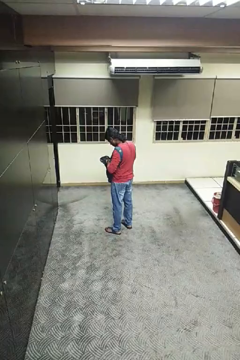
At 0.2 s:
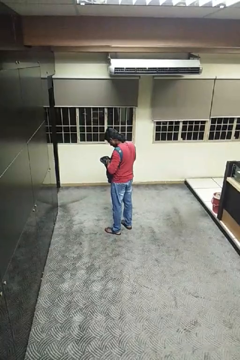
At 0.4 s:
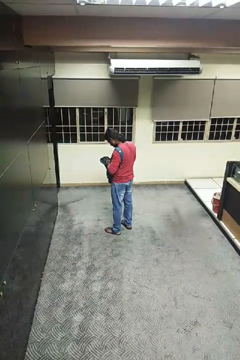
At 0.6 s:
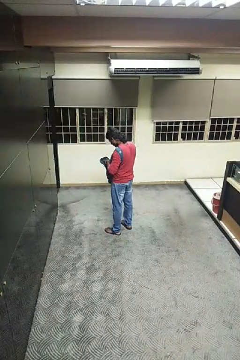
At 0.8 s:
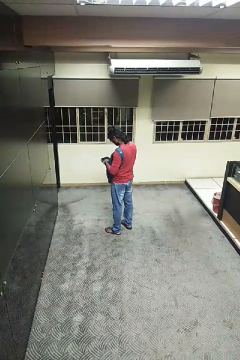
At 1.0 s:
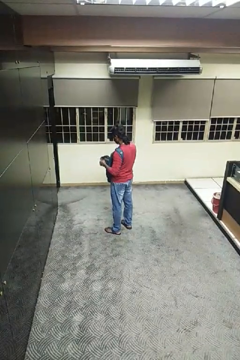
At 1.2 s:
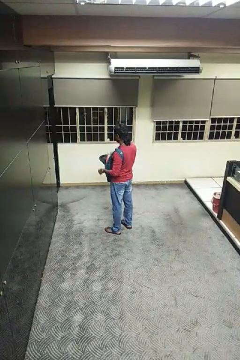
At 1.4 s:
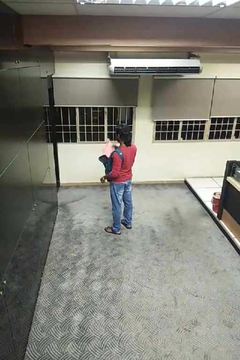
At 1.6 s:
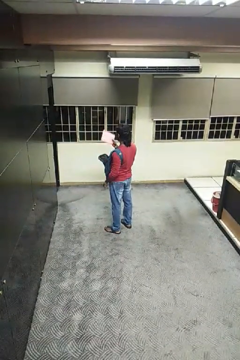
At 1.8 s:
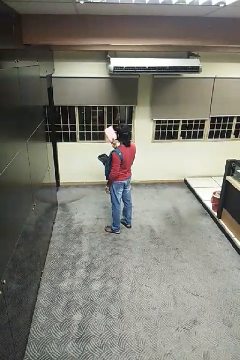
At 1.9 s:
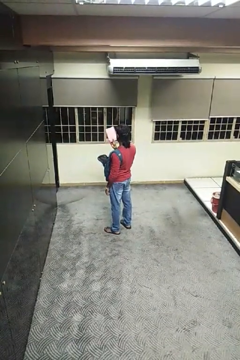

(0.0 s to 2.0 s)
person takes object from backpack

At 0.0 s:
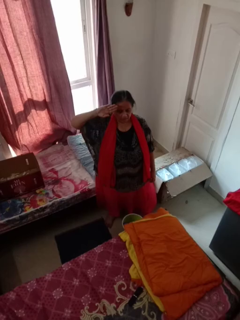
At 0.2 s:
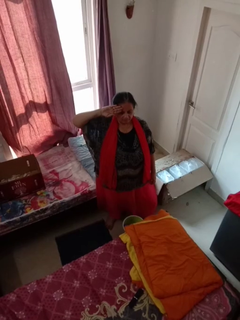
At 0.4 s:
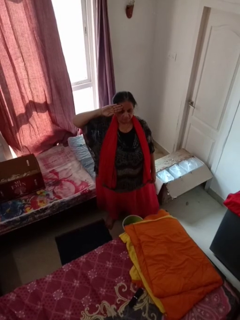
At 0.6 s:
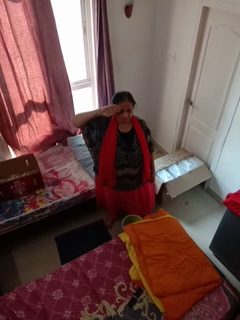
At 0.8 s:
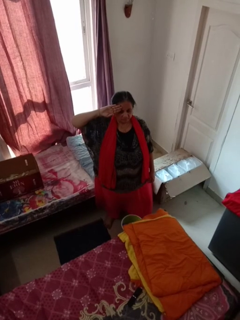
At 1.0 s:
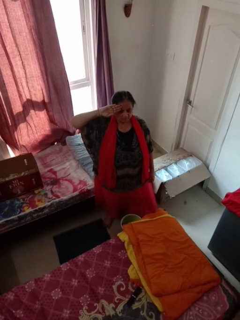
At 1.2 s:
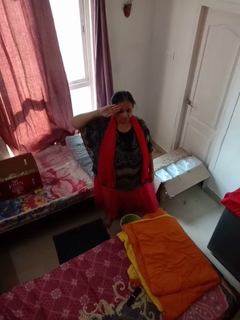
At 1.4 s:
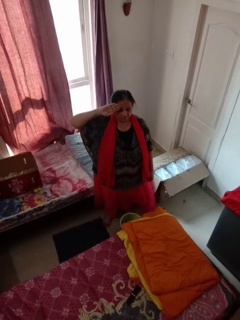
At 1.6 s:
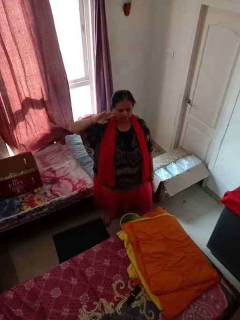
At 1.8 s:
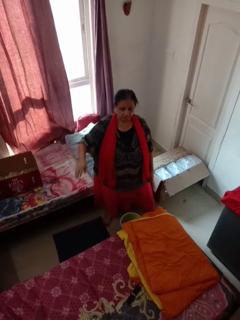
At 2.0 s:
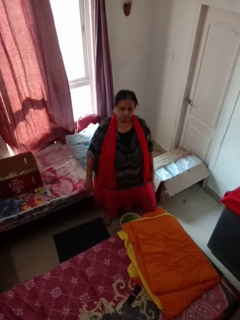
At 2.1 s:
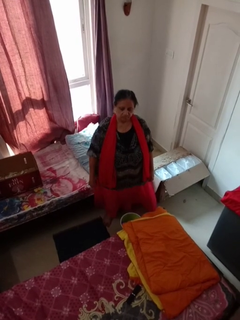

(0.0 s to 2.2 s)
person salutes

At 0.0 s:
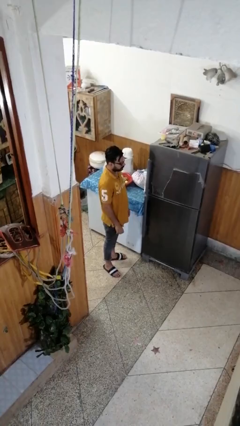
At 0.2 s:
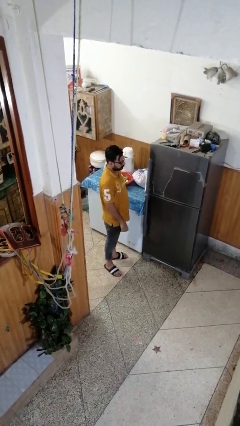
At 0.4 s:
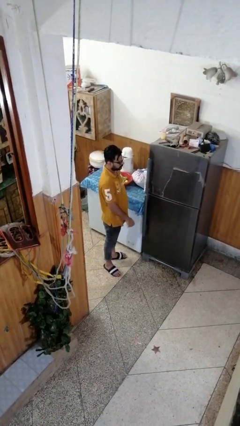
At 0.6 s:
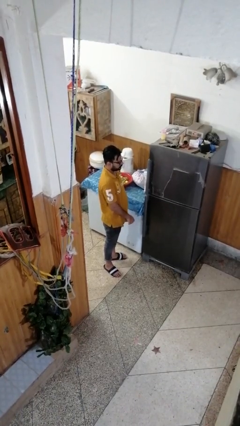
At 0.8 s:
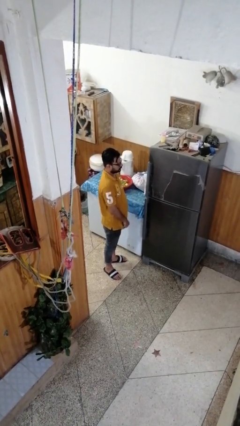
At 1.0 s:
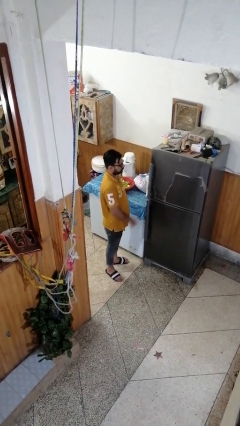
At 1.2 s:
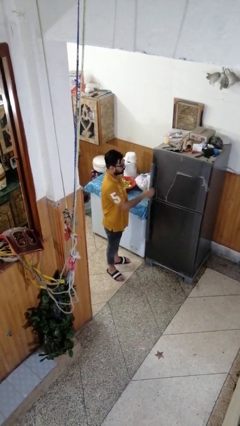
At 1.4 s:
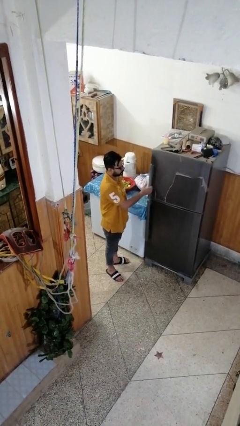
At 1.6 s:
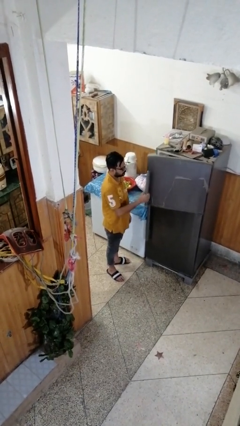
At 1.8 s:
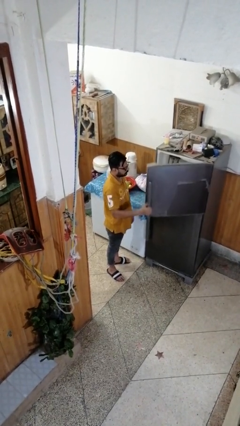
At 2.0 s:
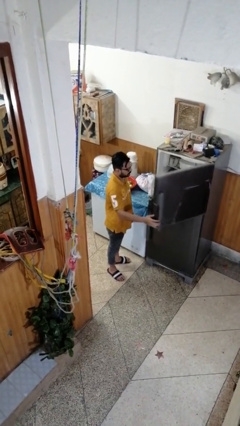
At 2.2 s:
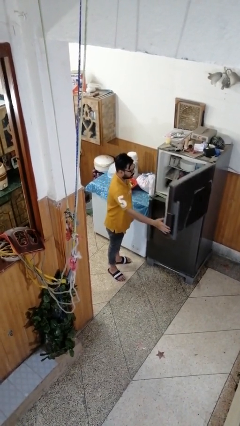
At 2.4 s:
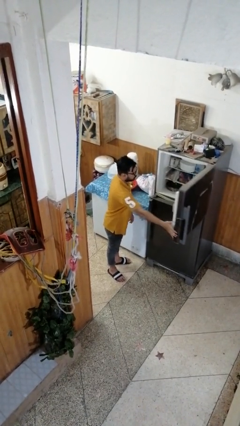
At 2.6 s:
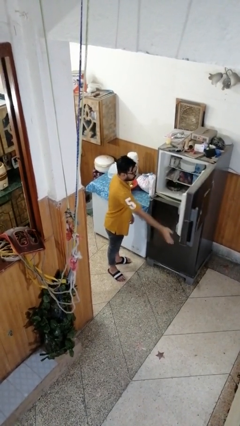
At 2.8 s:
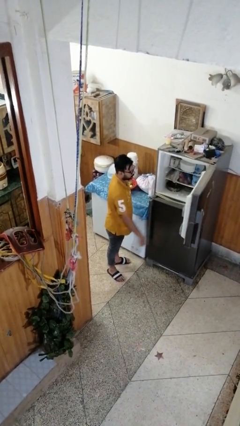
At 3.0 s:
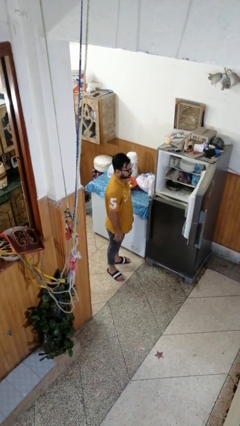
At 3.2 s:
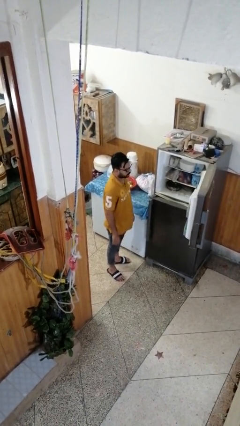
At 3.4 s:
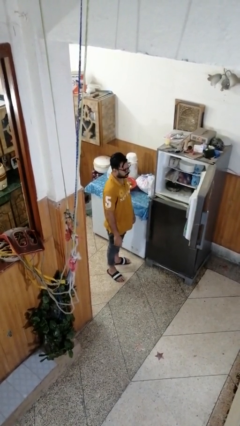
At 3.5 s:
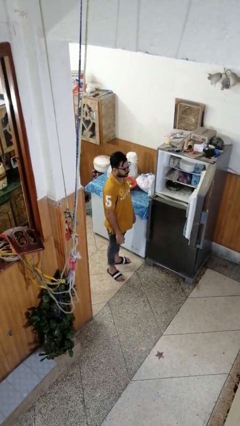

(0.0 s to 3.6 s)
person opens refrigerator

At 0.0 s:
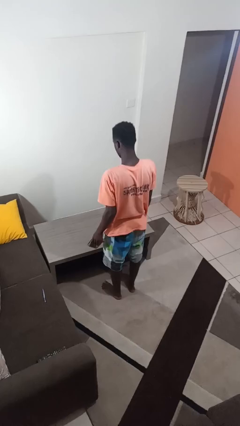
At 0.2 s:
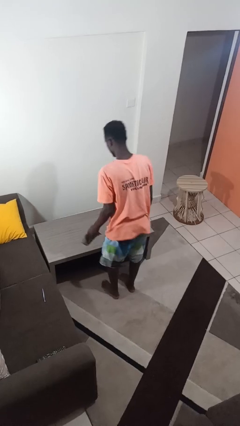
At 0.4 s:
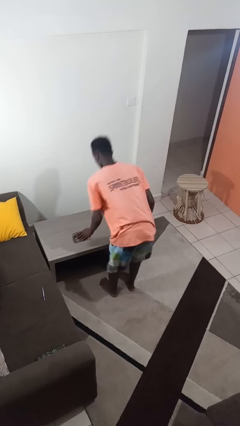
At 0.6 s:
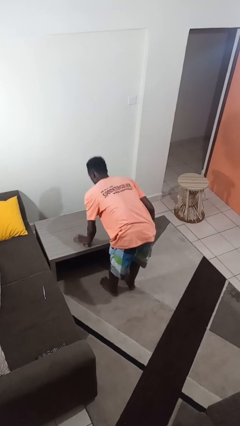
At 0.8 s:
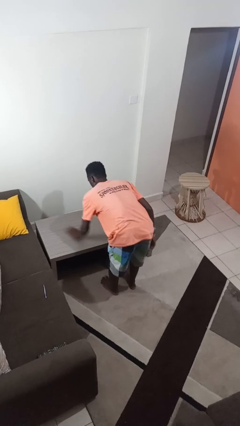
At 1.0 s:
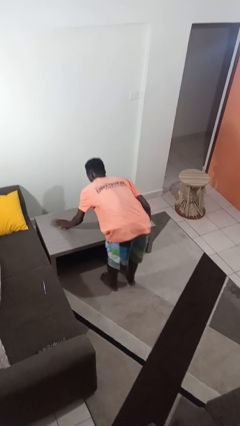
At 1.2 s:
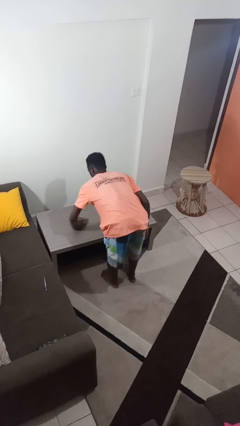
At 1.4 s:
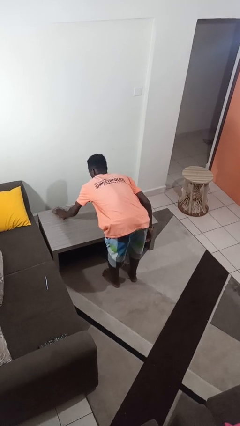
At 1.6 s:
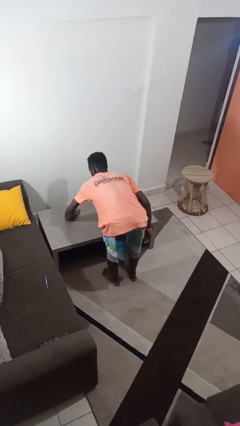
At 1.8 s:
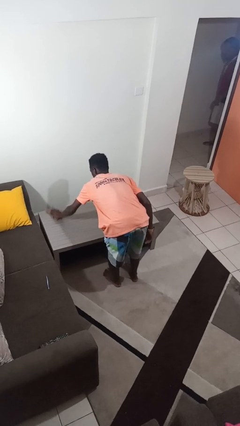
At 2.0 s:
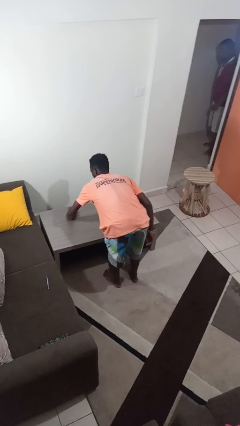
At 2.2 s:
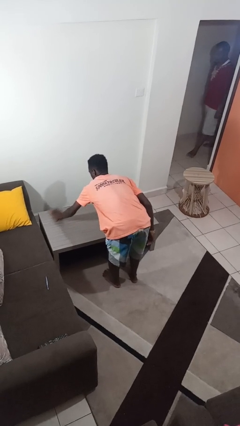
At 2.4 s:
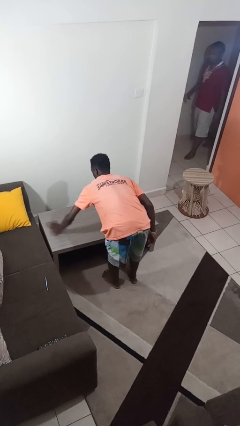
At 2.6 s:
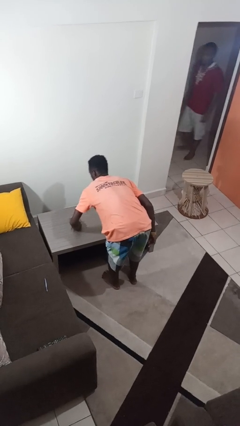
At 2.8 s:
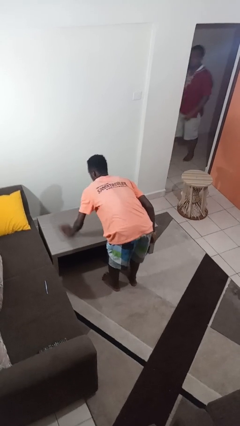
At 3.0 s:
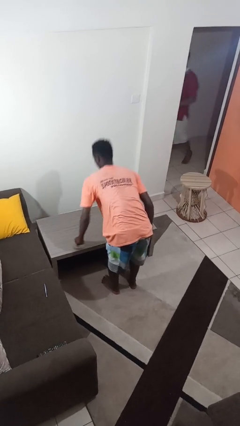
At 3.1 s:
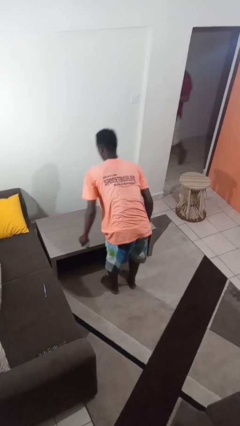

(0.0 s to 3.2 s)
person cleans table with rag

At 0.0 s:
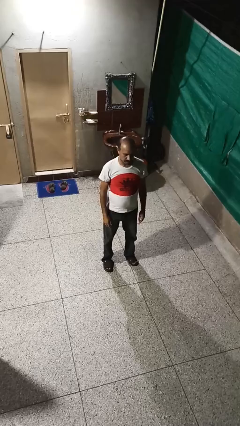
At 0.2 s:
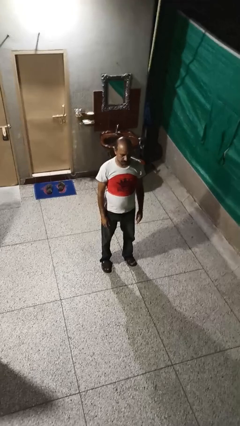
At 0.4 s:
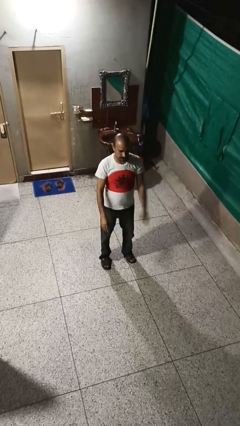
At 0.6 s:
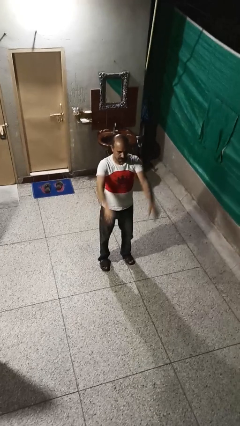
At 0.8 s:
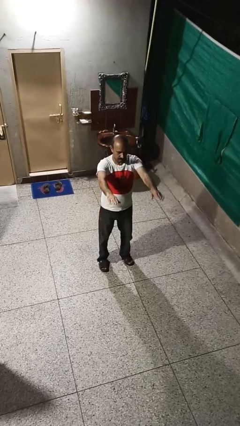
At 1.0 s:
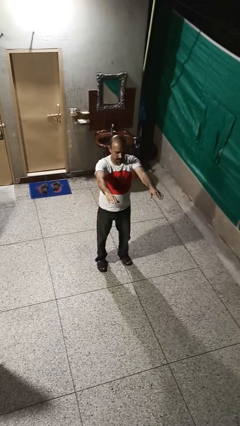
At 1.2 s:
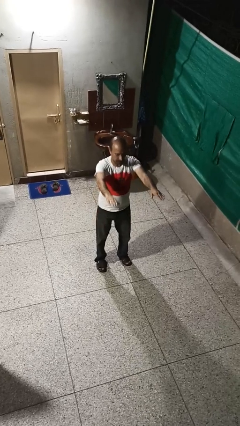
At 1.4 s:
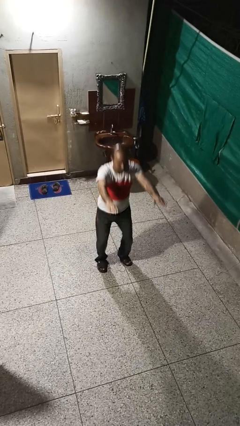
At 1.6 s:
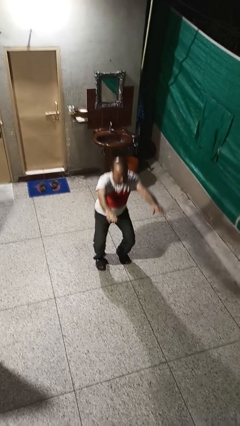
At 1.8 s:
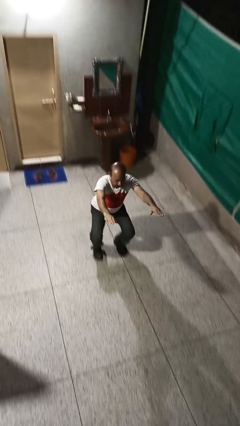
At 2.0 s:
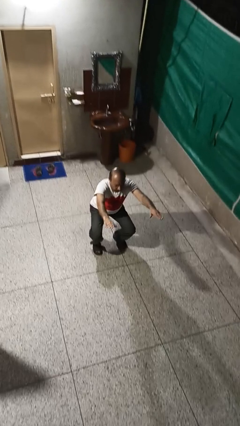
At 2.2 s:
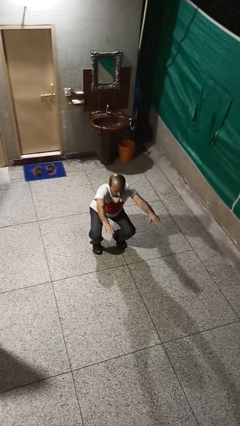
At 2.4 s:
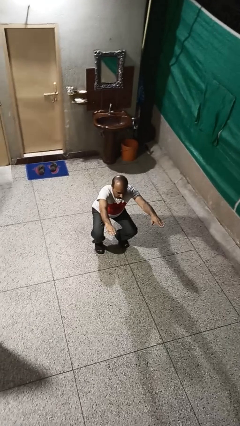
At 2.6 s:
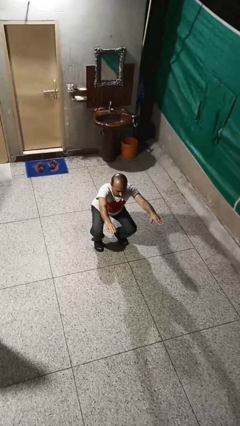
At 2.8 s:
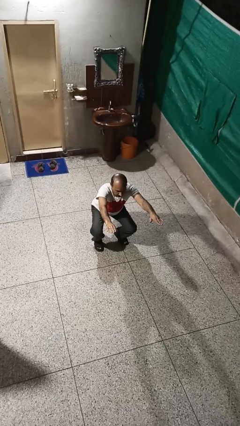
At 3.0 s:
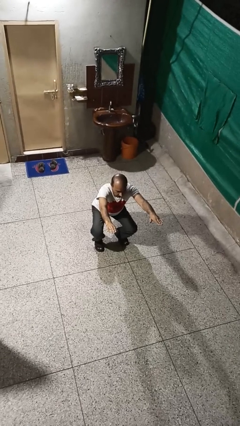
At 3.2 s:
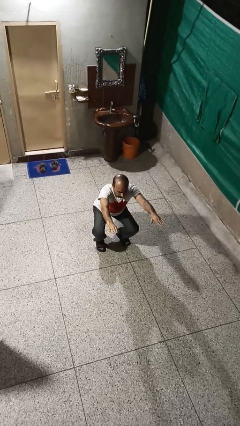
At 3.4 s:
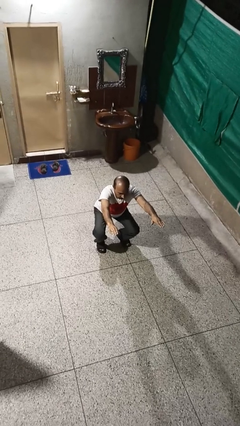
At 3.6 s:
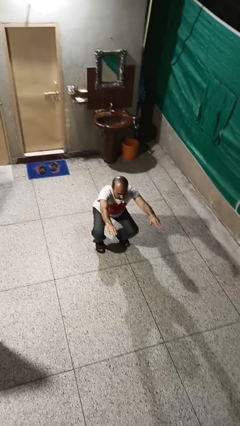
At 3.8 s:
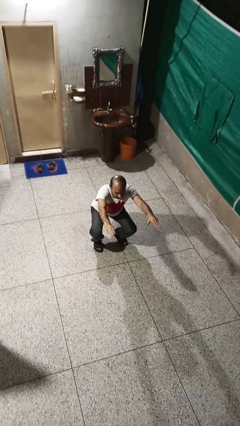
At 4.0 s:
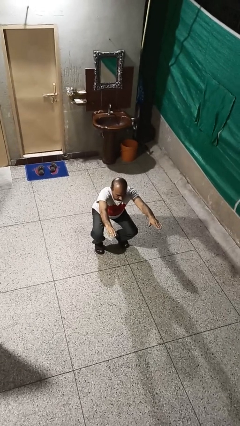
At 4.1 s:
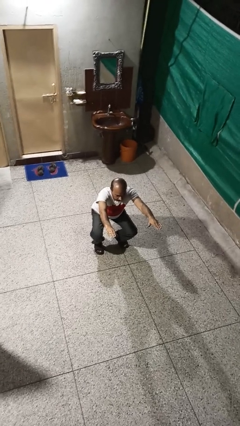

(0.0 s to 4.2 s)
person squats

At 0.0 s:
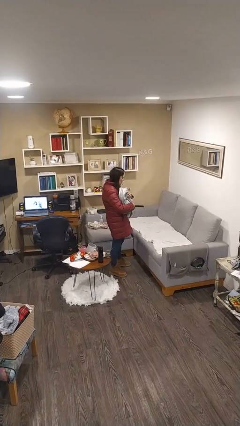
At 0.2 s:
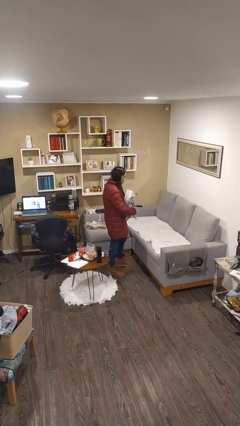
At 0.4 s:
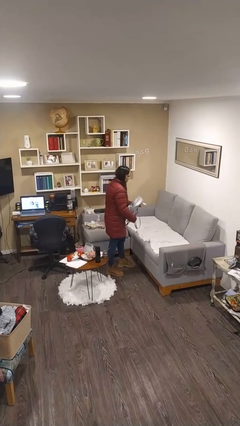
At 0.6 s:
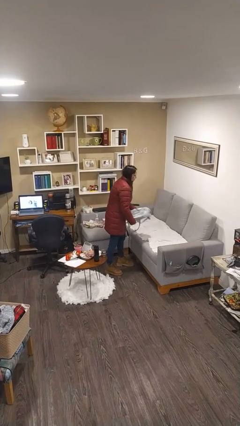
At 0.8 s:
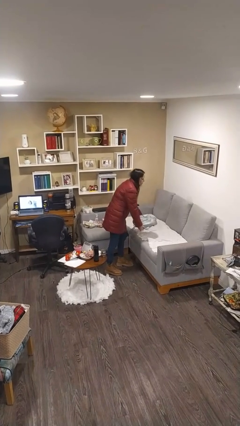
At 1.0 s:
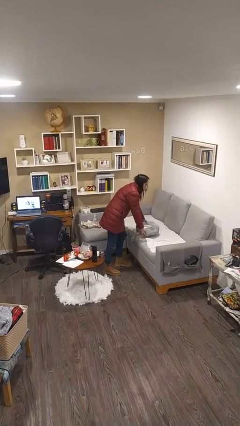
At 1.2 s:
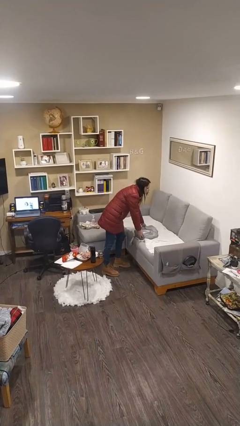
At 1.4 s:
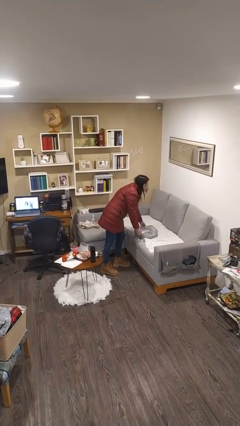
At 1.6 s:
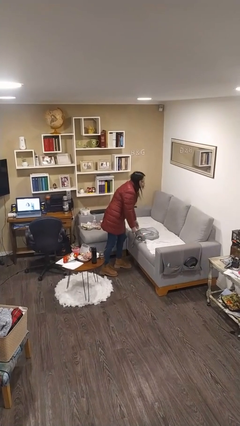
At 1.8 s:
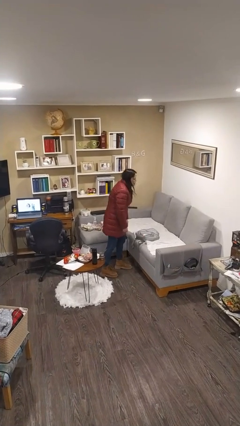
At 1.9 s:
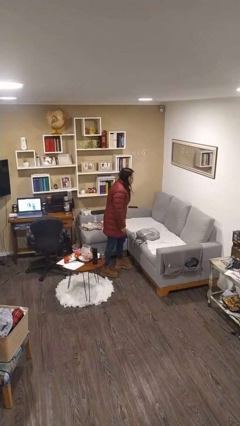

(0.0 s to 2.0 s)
person puts down object on couch

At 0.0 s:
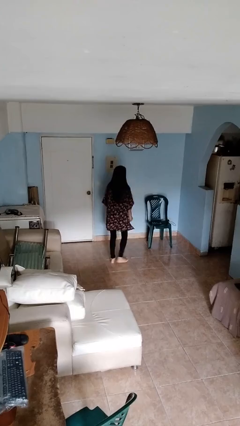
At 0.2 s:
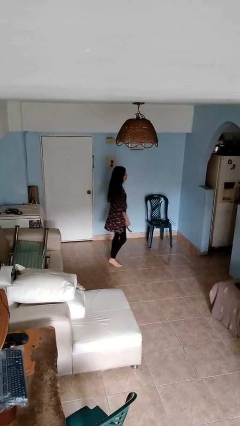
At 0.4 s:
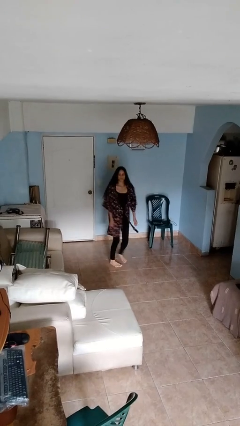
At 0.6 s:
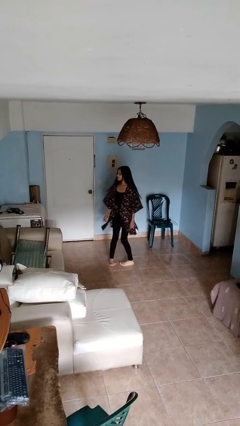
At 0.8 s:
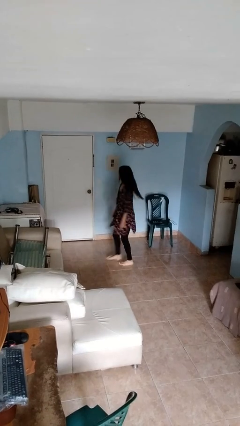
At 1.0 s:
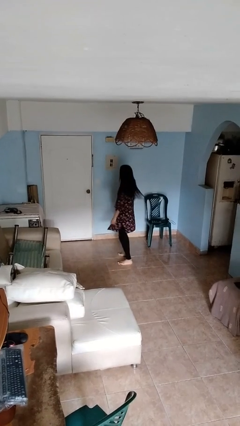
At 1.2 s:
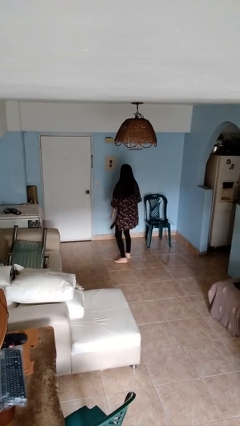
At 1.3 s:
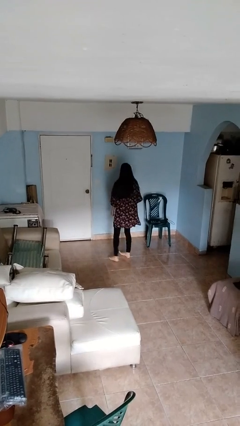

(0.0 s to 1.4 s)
person twirls
